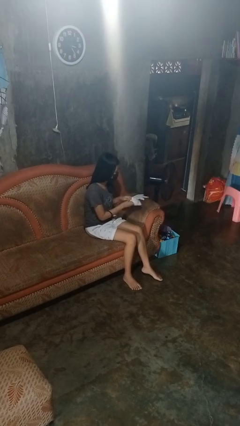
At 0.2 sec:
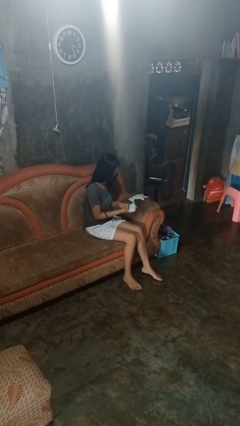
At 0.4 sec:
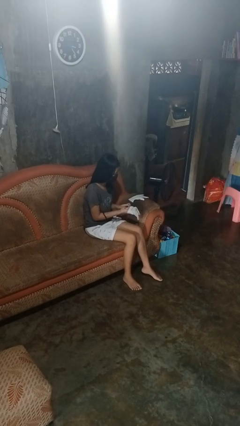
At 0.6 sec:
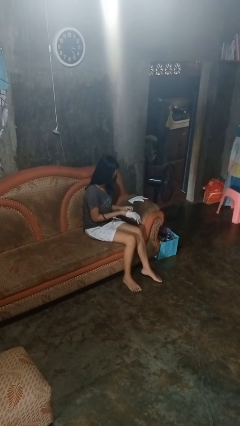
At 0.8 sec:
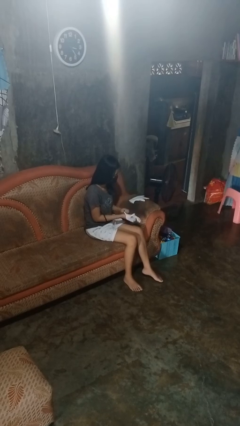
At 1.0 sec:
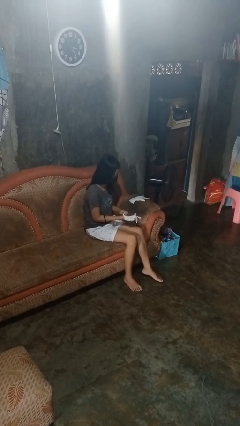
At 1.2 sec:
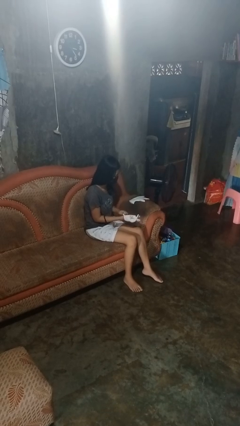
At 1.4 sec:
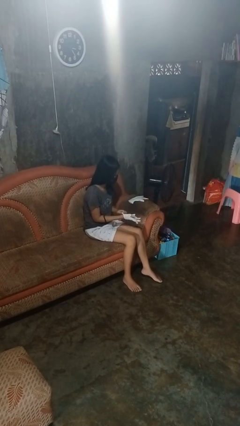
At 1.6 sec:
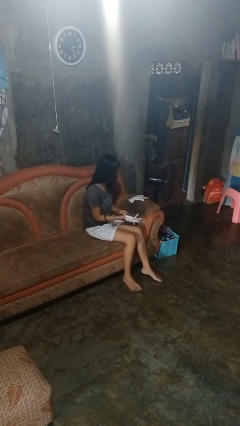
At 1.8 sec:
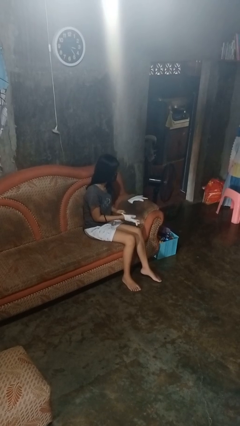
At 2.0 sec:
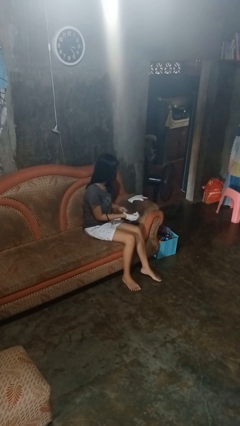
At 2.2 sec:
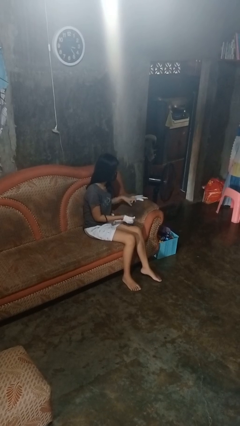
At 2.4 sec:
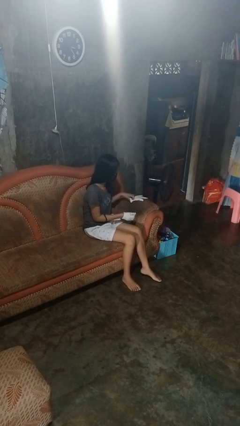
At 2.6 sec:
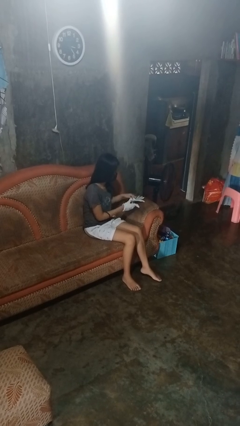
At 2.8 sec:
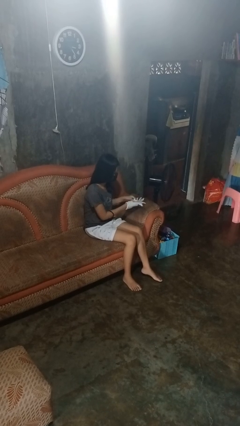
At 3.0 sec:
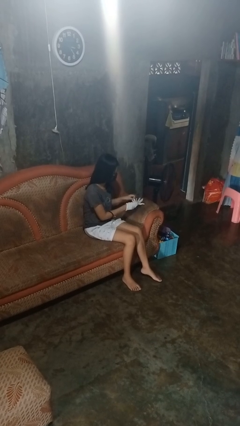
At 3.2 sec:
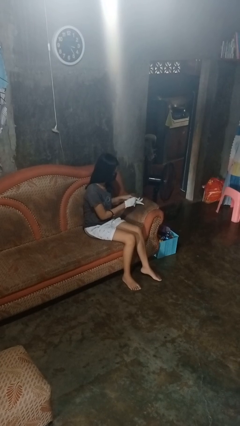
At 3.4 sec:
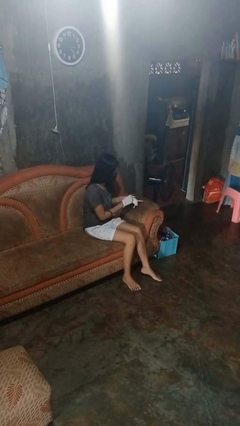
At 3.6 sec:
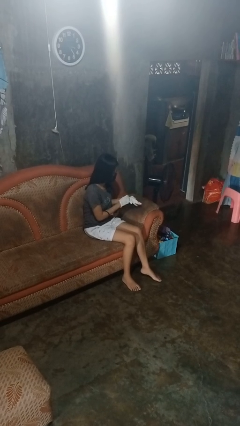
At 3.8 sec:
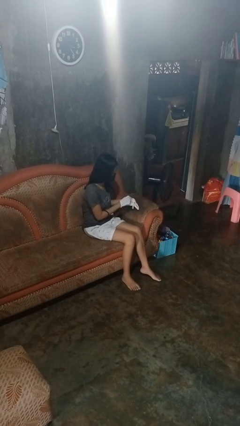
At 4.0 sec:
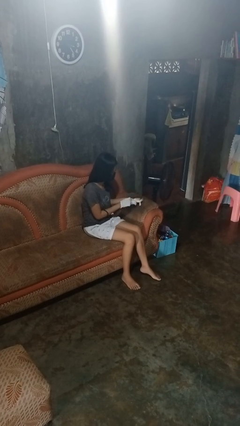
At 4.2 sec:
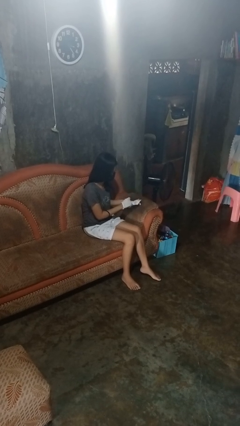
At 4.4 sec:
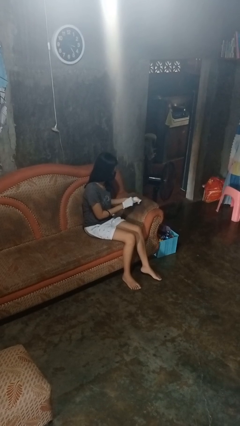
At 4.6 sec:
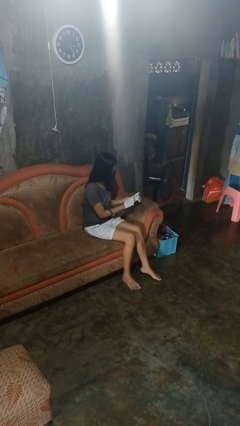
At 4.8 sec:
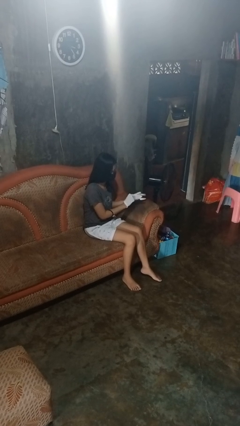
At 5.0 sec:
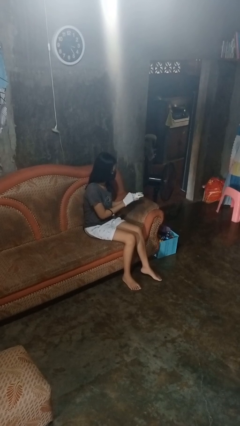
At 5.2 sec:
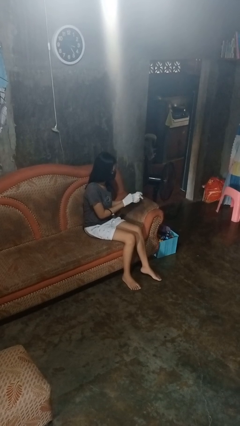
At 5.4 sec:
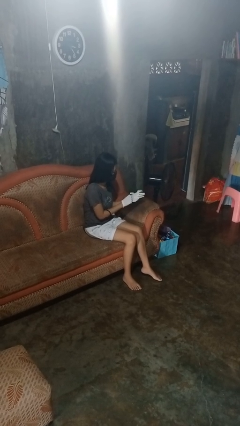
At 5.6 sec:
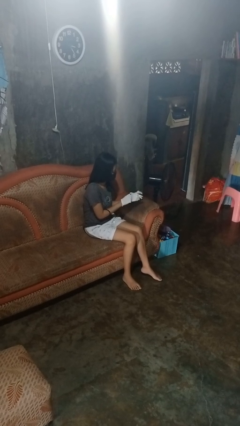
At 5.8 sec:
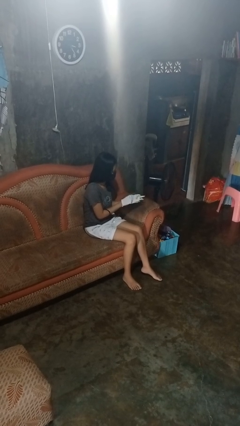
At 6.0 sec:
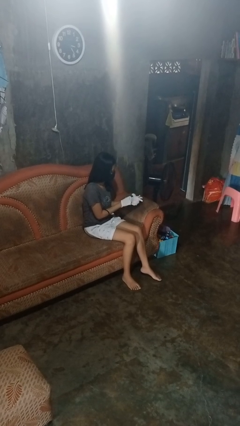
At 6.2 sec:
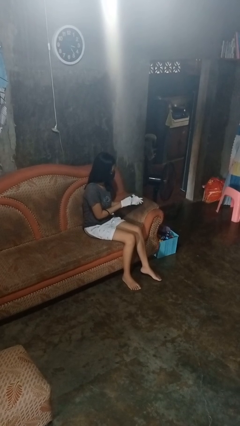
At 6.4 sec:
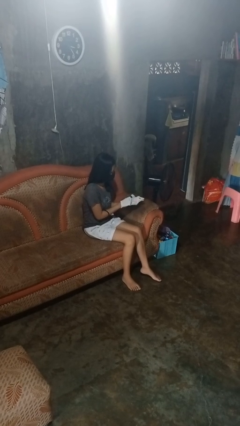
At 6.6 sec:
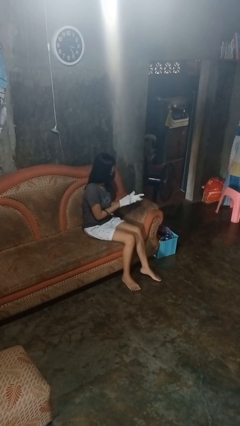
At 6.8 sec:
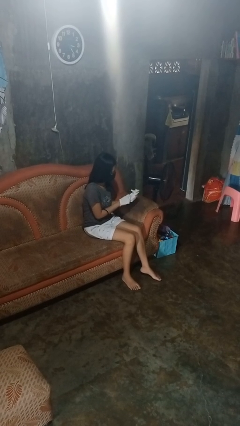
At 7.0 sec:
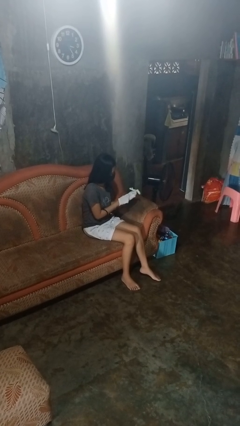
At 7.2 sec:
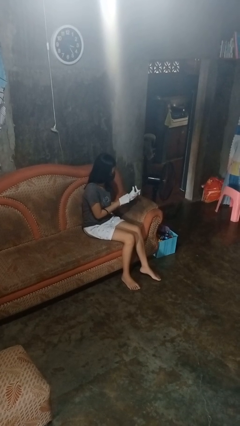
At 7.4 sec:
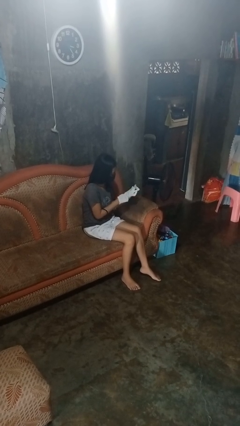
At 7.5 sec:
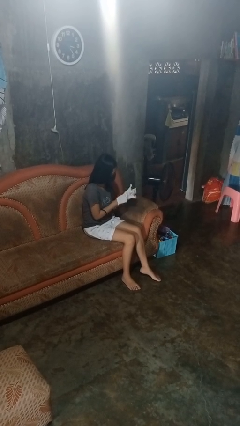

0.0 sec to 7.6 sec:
person puts on gloves

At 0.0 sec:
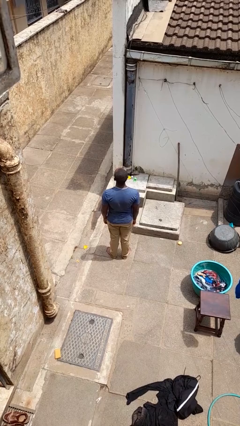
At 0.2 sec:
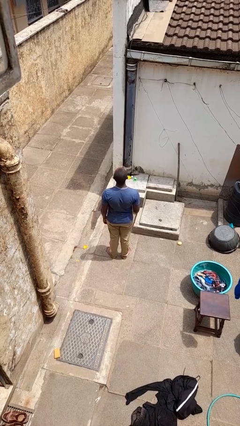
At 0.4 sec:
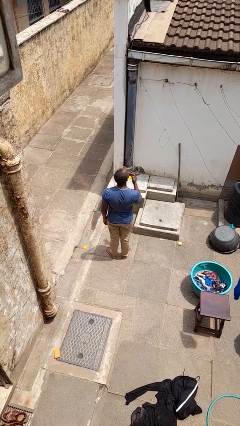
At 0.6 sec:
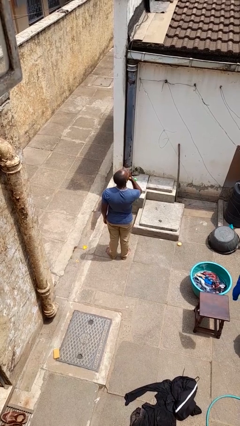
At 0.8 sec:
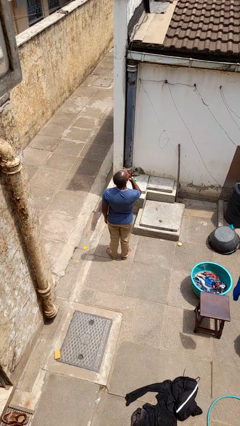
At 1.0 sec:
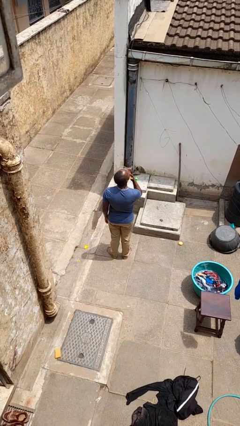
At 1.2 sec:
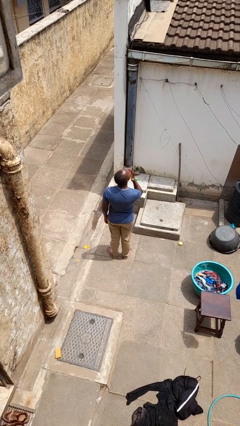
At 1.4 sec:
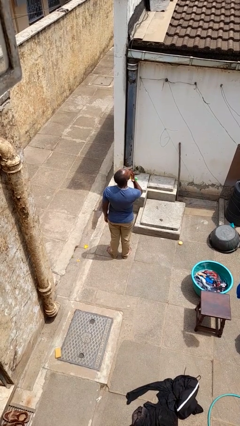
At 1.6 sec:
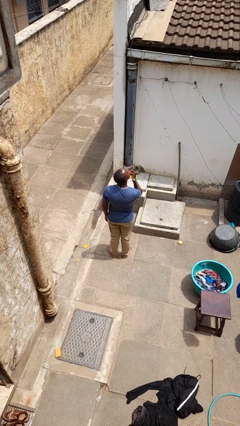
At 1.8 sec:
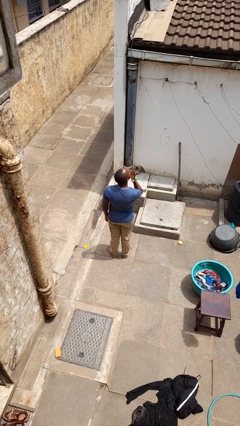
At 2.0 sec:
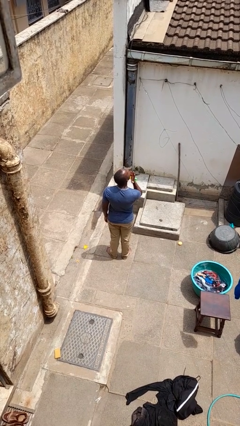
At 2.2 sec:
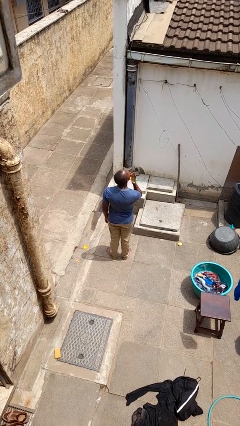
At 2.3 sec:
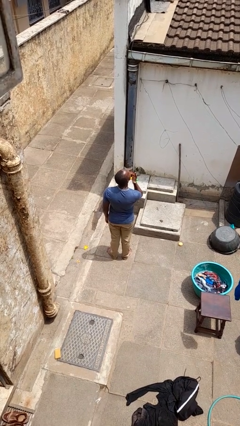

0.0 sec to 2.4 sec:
person licks fingers

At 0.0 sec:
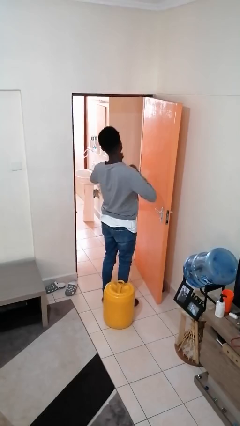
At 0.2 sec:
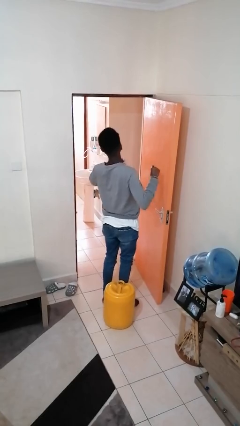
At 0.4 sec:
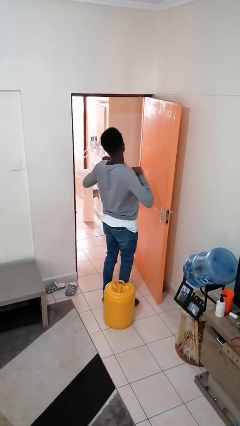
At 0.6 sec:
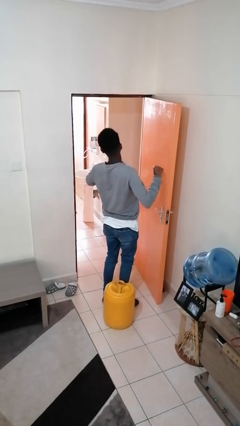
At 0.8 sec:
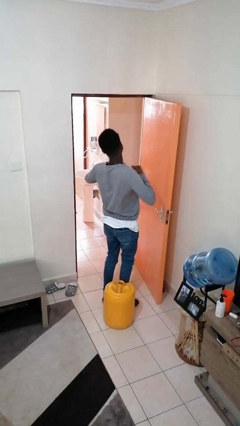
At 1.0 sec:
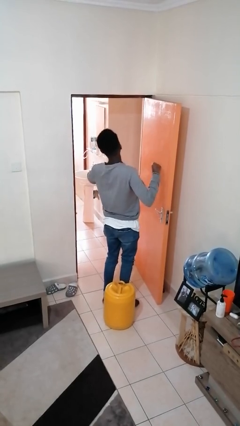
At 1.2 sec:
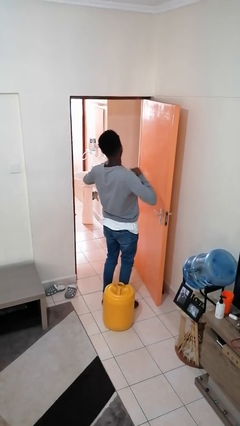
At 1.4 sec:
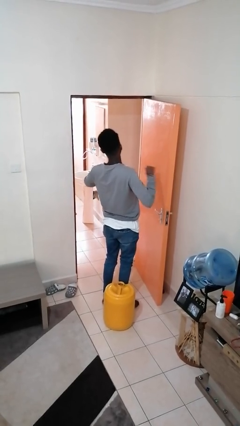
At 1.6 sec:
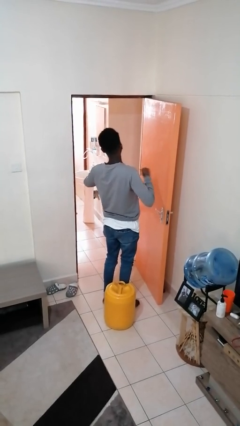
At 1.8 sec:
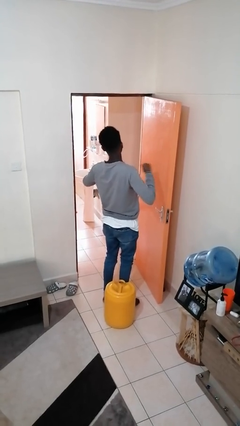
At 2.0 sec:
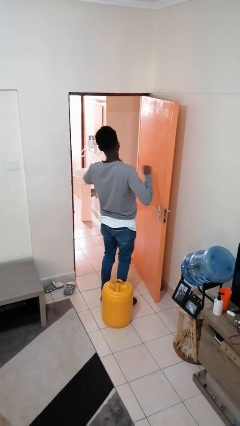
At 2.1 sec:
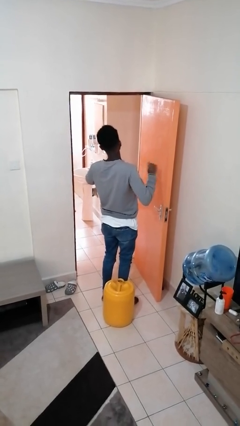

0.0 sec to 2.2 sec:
person drums on chest

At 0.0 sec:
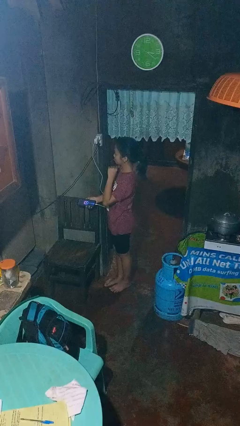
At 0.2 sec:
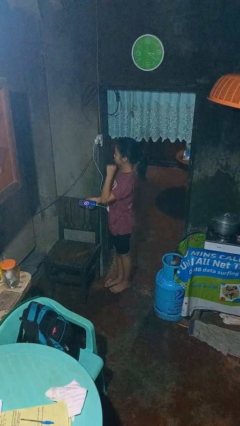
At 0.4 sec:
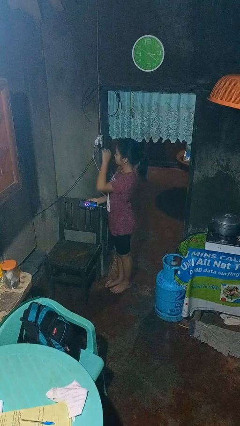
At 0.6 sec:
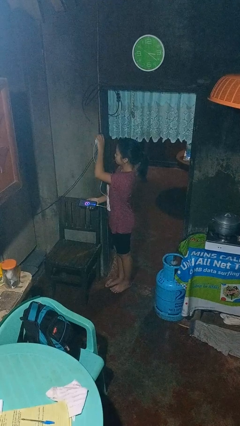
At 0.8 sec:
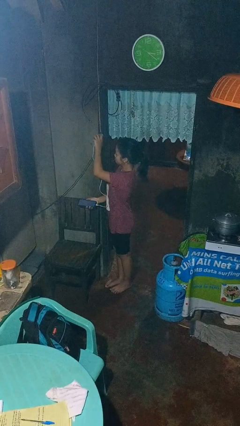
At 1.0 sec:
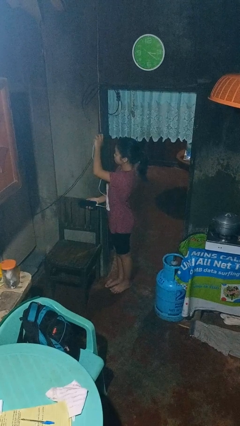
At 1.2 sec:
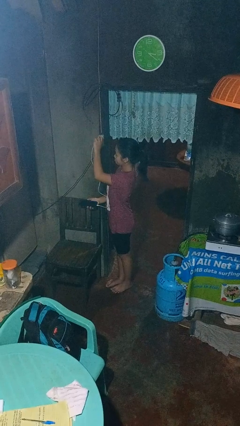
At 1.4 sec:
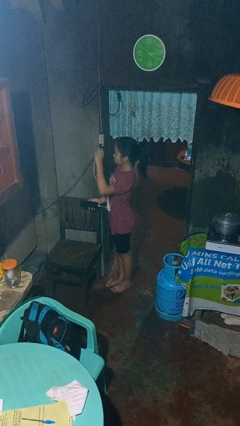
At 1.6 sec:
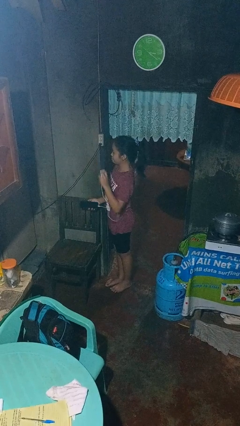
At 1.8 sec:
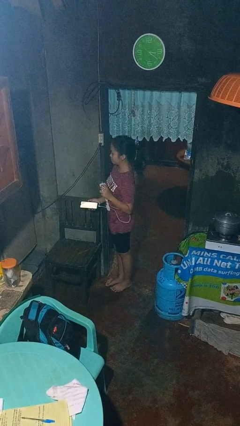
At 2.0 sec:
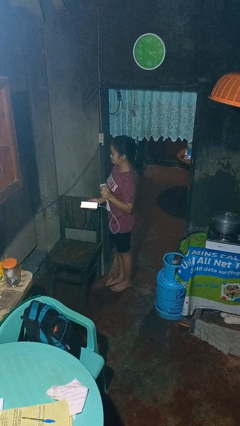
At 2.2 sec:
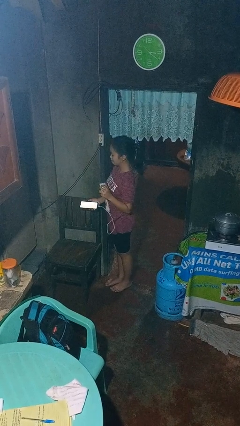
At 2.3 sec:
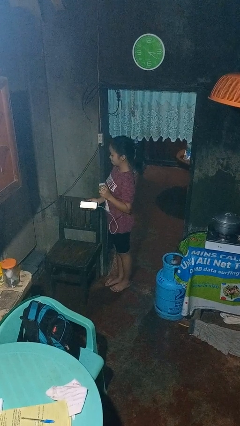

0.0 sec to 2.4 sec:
person unplugs from electrical socket

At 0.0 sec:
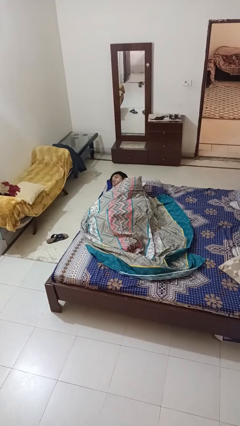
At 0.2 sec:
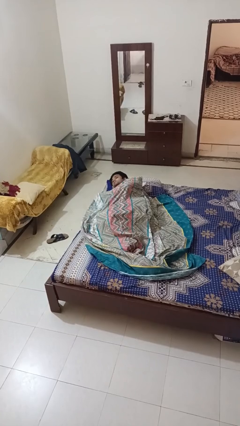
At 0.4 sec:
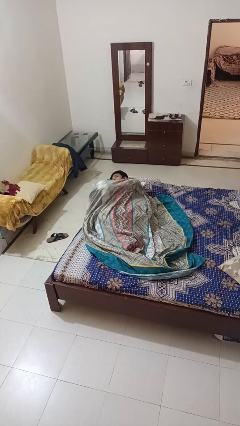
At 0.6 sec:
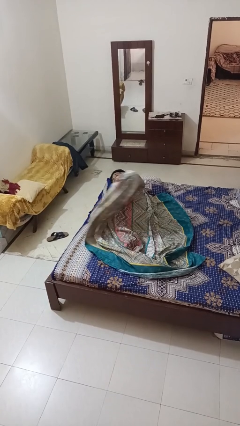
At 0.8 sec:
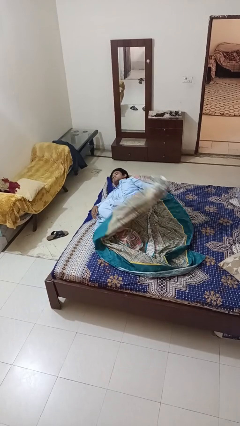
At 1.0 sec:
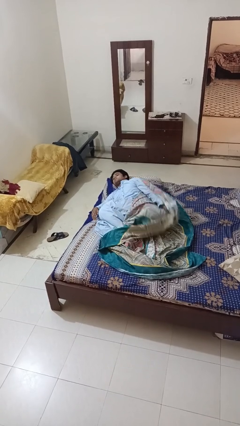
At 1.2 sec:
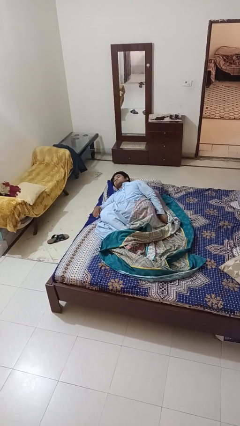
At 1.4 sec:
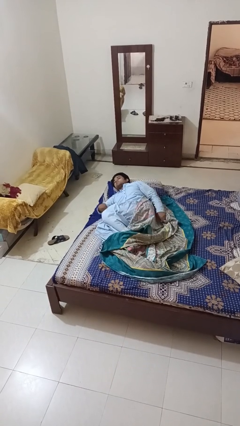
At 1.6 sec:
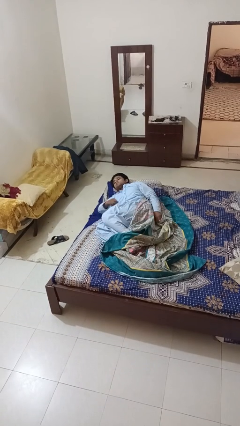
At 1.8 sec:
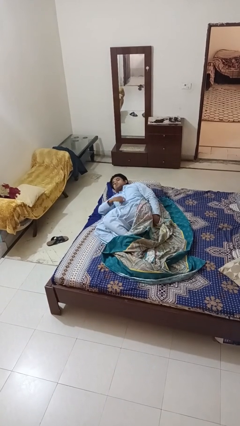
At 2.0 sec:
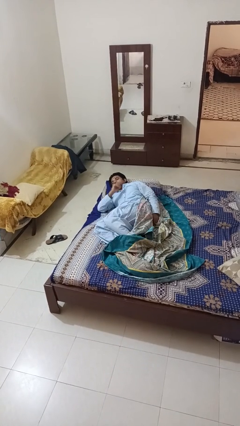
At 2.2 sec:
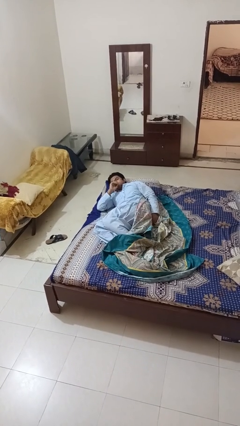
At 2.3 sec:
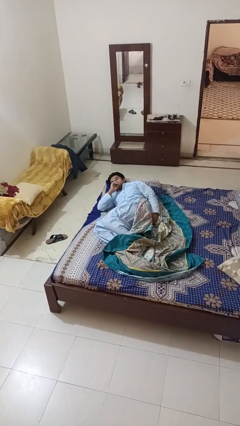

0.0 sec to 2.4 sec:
person uncovers with bedsheets

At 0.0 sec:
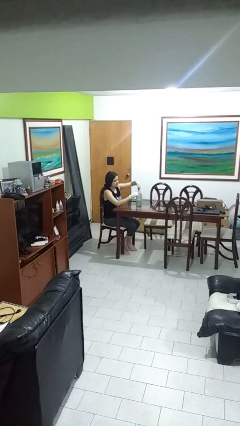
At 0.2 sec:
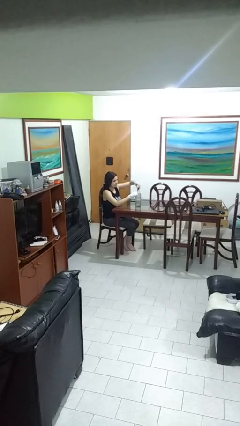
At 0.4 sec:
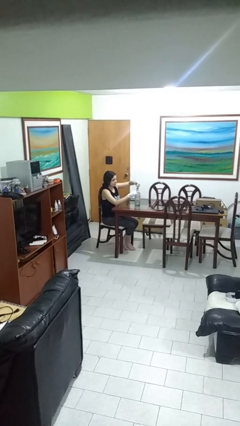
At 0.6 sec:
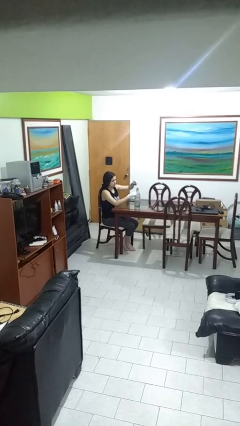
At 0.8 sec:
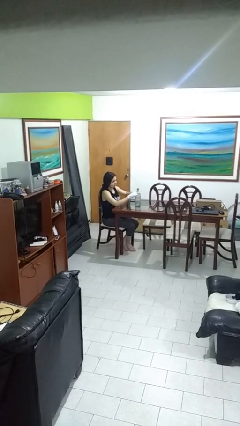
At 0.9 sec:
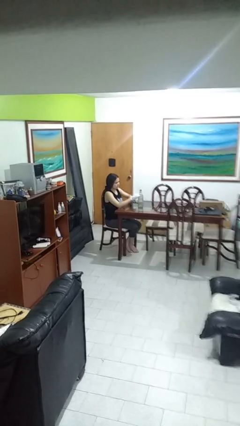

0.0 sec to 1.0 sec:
person unscrews lid from bottle
